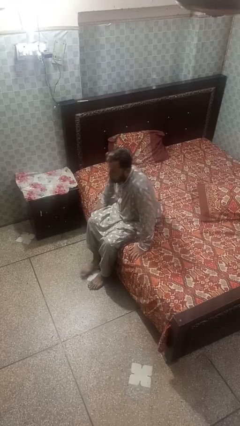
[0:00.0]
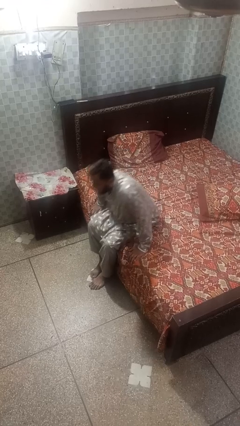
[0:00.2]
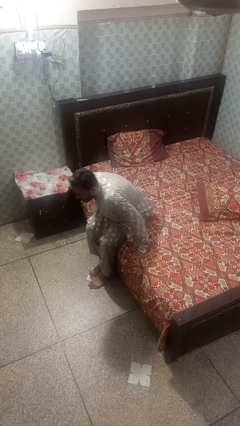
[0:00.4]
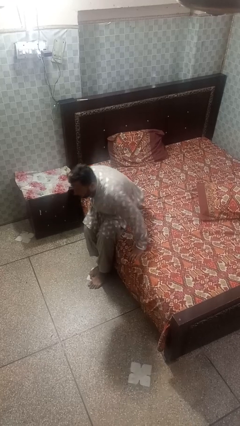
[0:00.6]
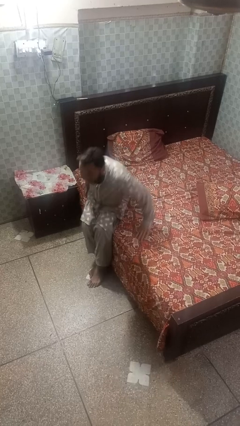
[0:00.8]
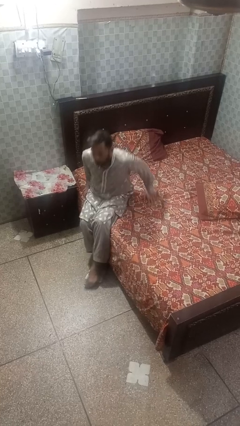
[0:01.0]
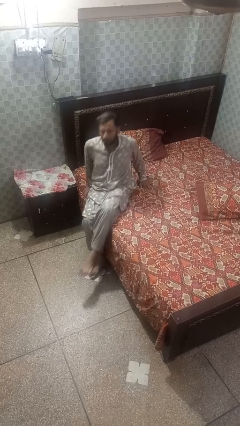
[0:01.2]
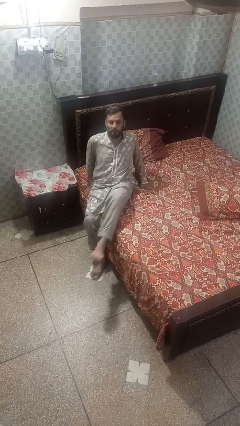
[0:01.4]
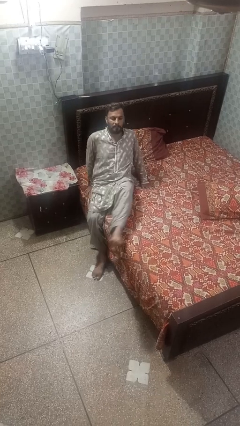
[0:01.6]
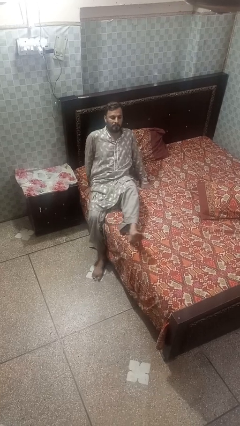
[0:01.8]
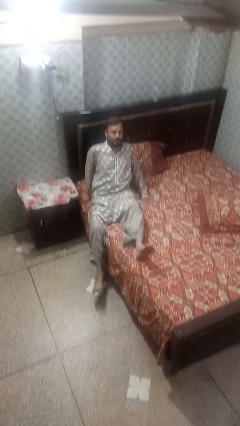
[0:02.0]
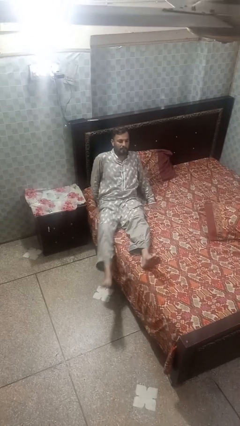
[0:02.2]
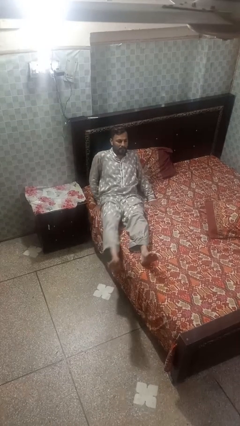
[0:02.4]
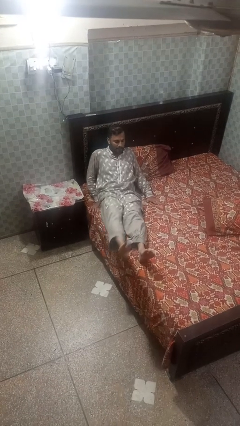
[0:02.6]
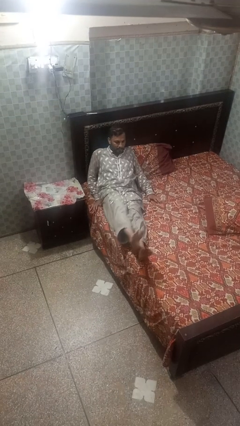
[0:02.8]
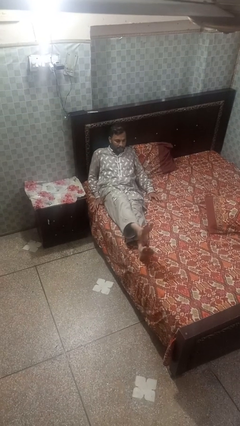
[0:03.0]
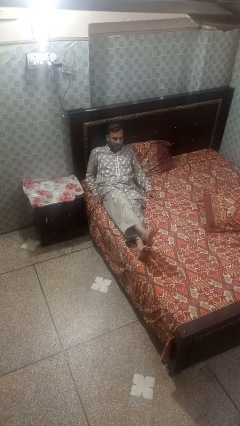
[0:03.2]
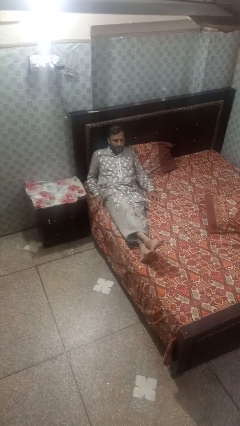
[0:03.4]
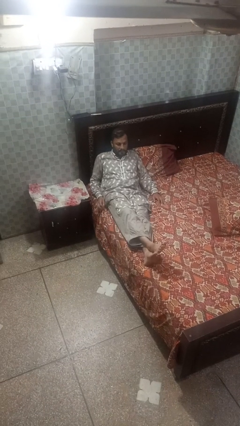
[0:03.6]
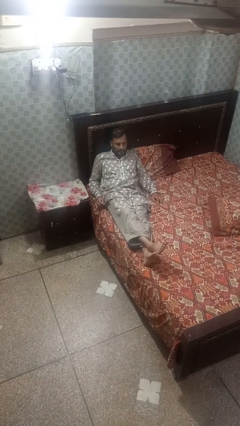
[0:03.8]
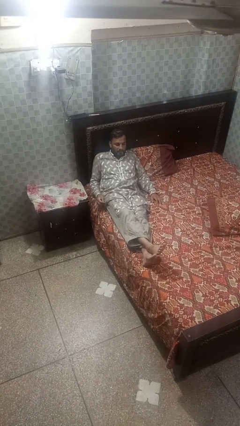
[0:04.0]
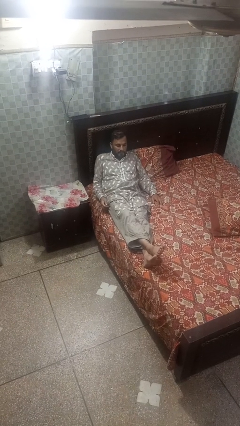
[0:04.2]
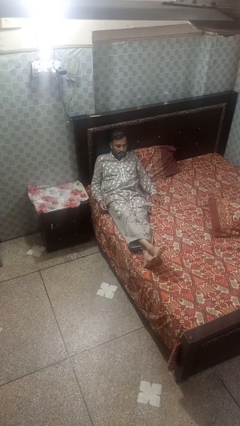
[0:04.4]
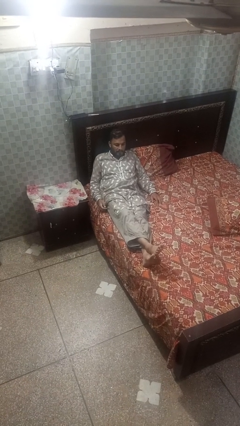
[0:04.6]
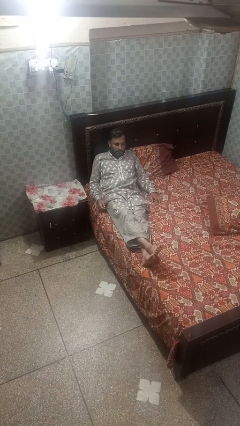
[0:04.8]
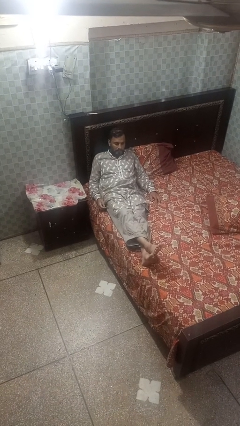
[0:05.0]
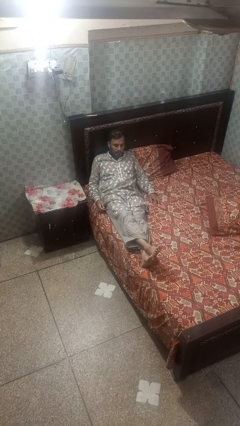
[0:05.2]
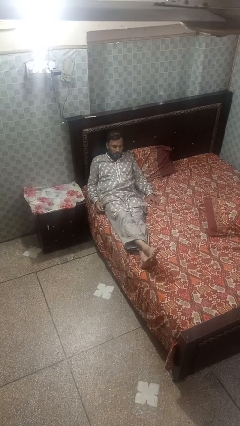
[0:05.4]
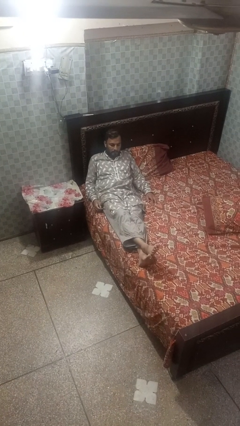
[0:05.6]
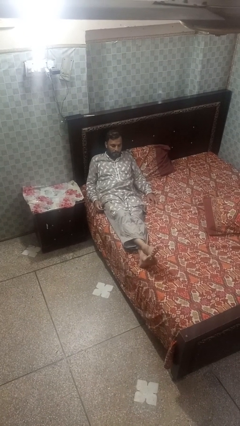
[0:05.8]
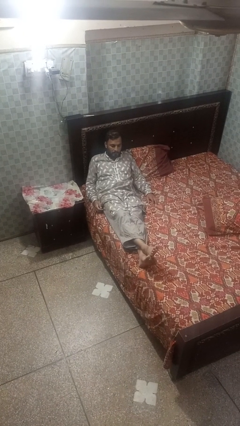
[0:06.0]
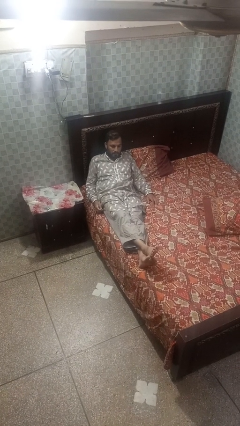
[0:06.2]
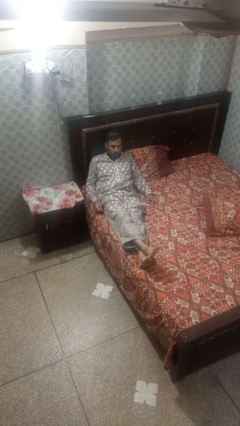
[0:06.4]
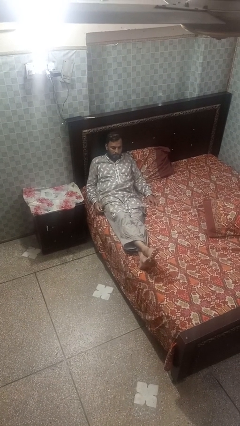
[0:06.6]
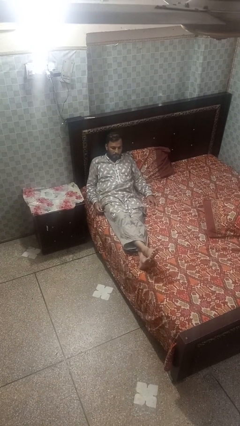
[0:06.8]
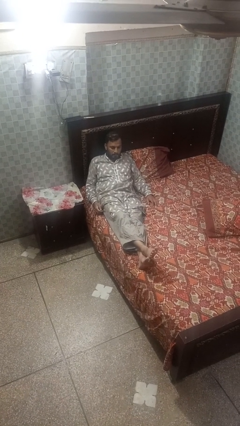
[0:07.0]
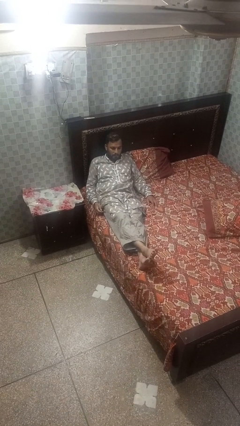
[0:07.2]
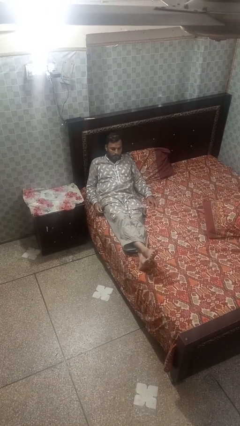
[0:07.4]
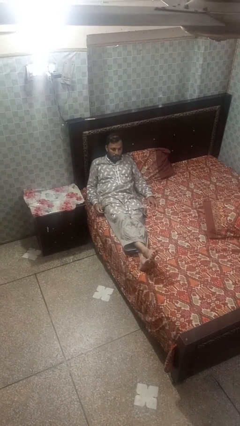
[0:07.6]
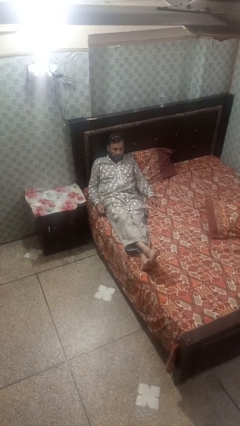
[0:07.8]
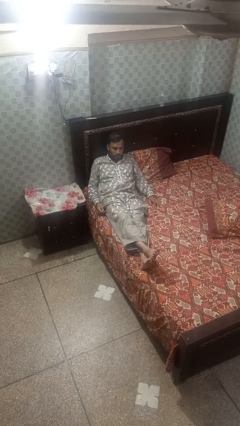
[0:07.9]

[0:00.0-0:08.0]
person lies down on bed

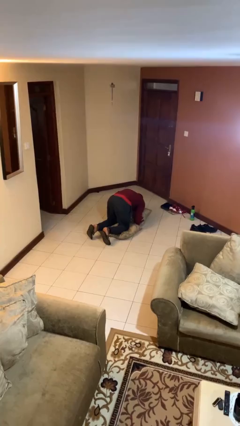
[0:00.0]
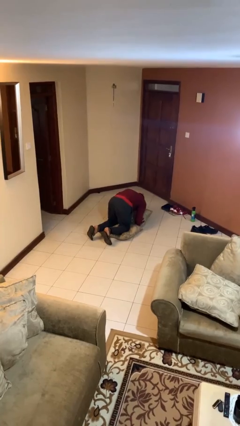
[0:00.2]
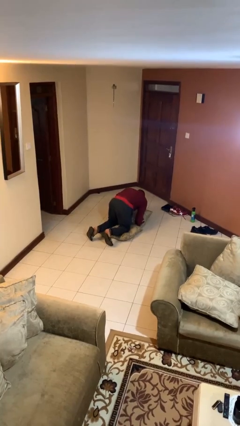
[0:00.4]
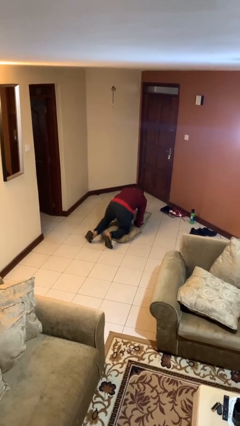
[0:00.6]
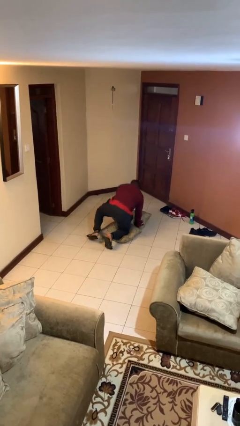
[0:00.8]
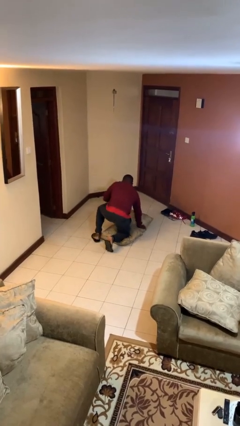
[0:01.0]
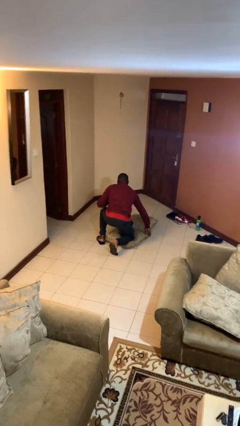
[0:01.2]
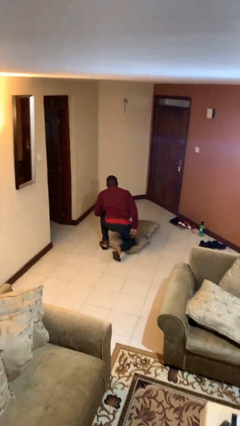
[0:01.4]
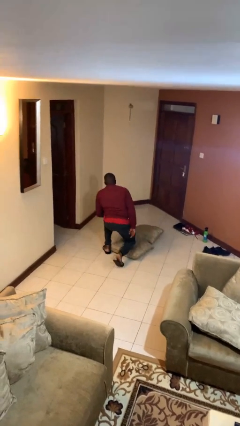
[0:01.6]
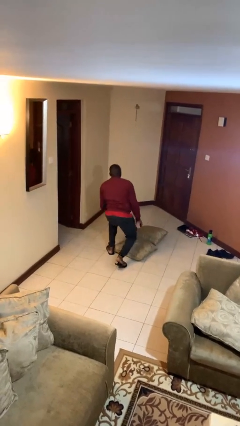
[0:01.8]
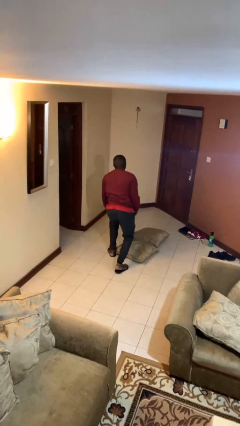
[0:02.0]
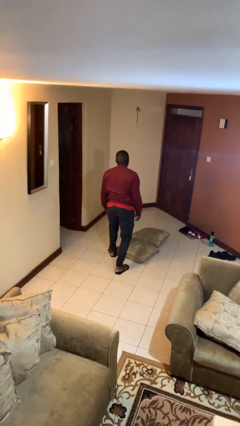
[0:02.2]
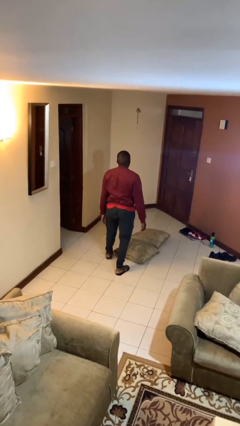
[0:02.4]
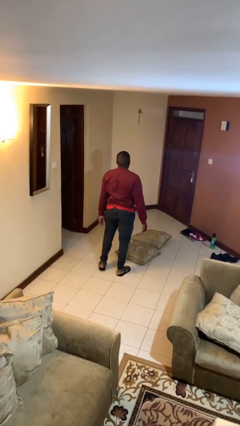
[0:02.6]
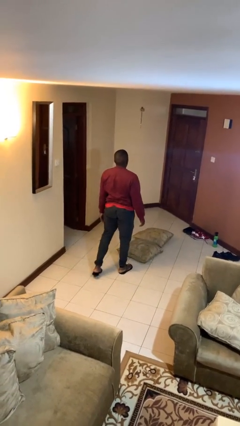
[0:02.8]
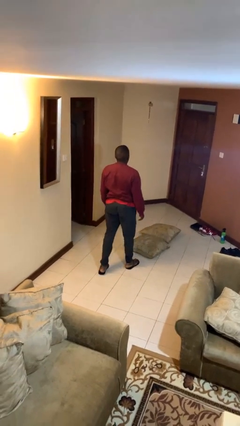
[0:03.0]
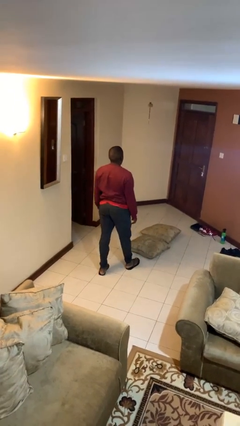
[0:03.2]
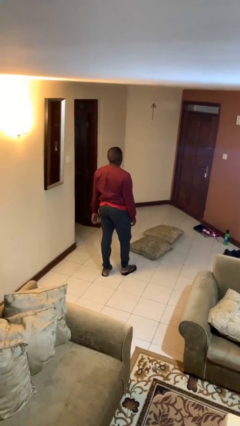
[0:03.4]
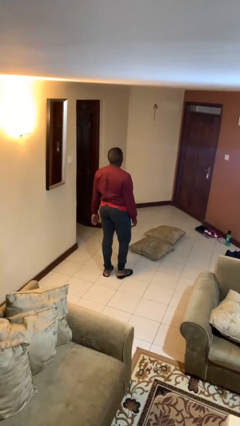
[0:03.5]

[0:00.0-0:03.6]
person stands up from floor

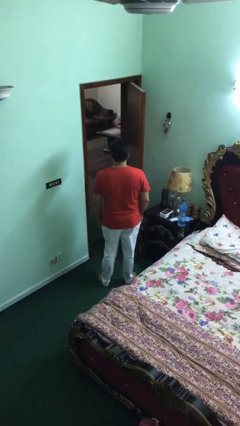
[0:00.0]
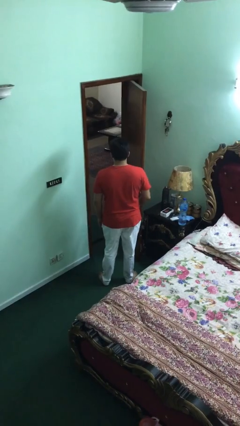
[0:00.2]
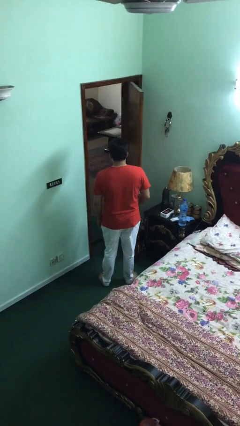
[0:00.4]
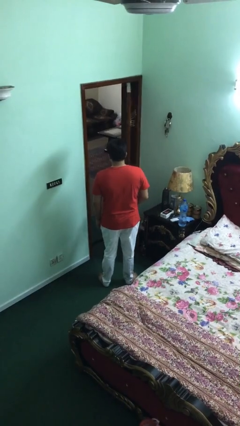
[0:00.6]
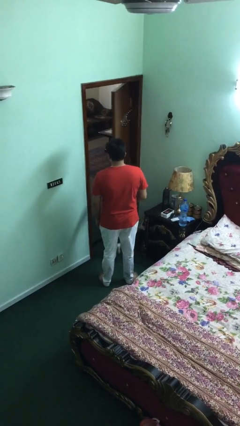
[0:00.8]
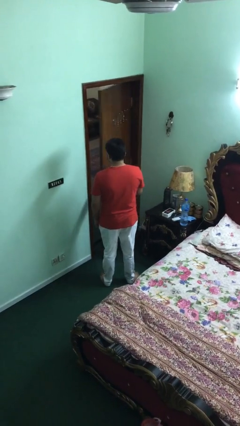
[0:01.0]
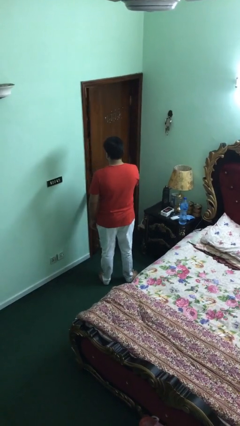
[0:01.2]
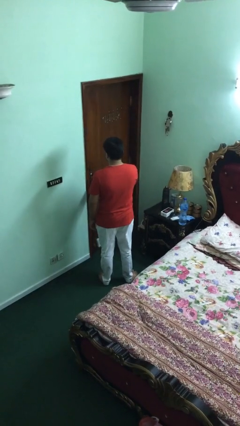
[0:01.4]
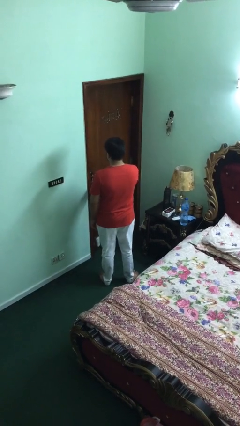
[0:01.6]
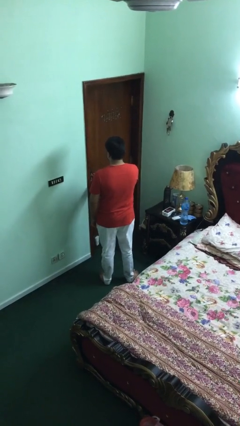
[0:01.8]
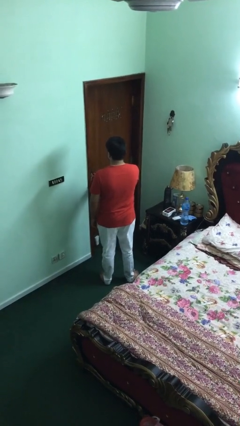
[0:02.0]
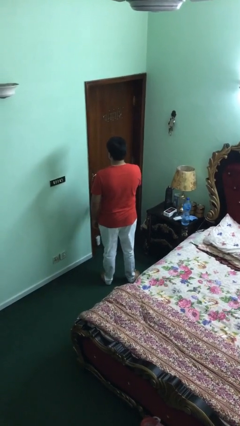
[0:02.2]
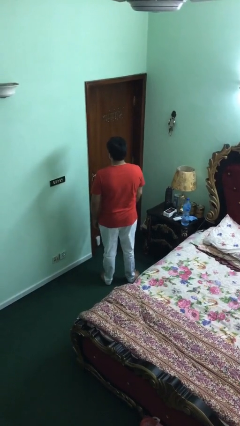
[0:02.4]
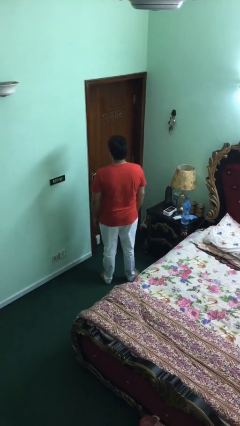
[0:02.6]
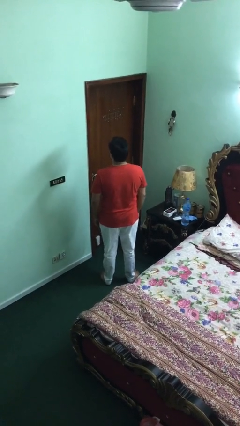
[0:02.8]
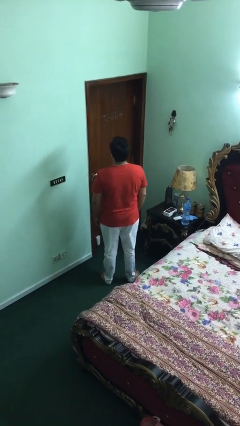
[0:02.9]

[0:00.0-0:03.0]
person closes facility door

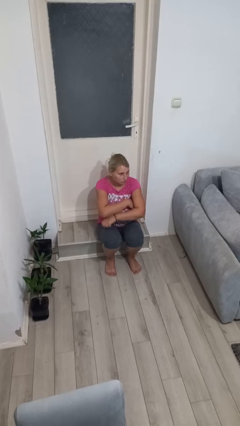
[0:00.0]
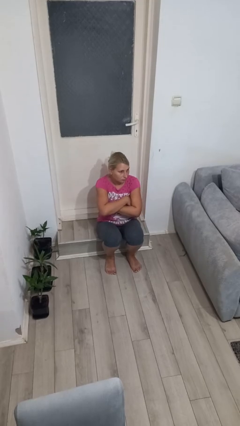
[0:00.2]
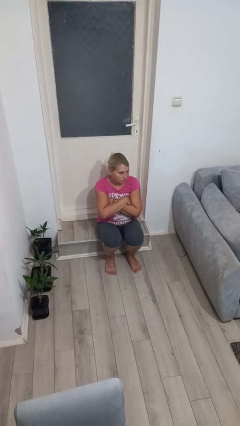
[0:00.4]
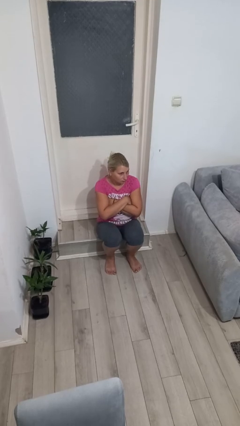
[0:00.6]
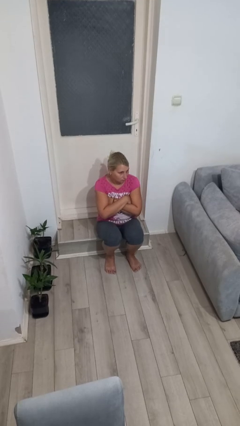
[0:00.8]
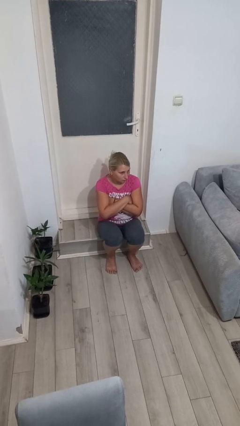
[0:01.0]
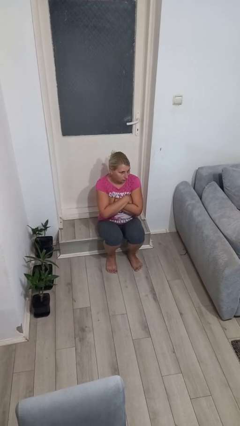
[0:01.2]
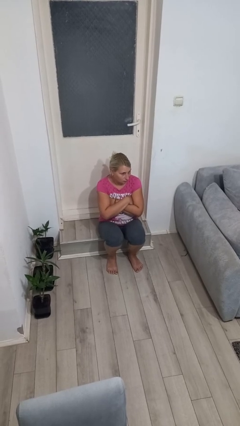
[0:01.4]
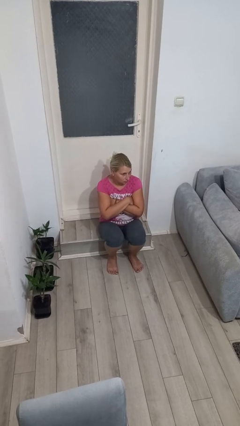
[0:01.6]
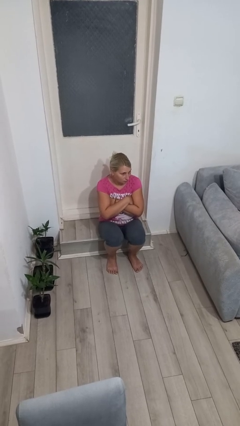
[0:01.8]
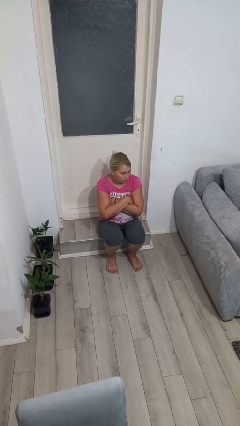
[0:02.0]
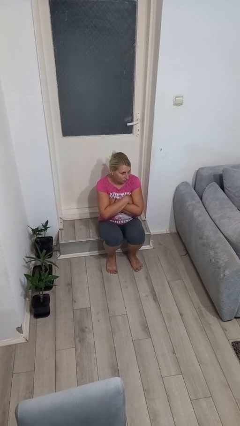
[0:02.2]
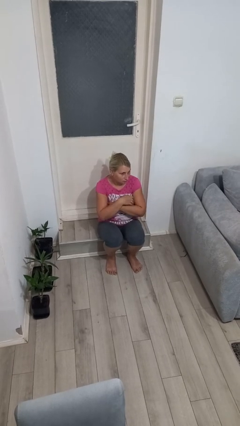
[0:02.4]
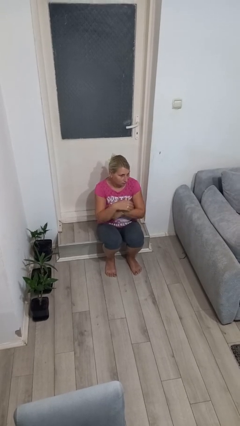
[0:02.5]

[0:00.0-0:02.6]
person crosses arms

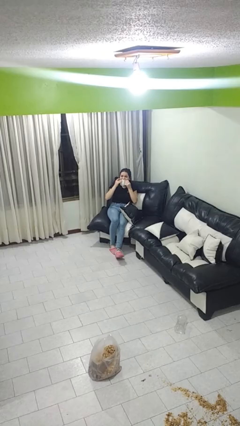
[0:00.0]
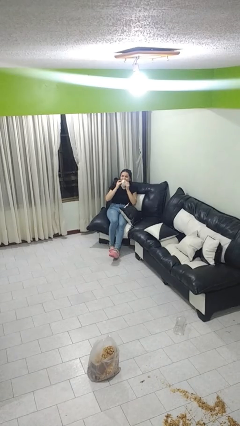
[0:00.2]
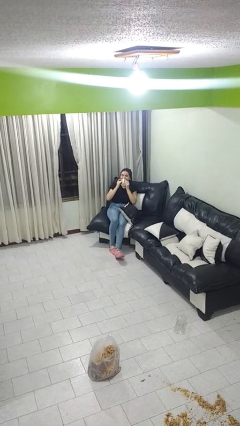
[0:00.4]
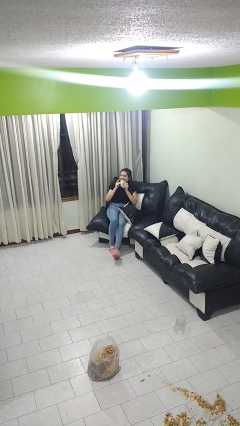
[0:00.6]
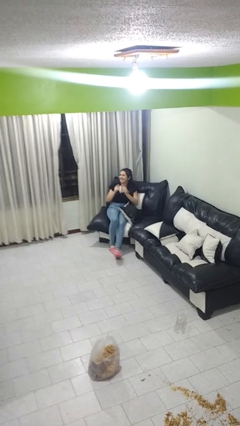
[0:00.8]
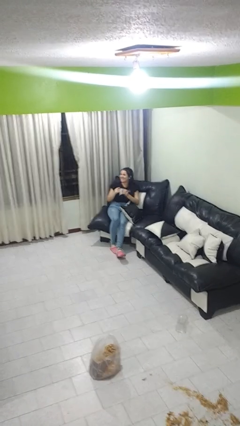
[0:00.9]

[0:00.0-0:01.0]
person wipes mouth with napkin
